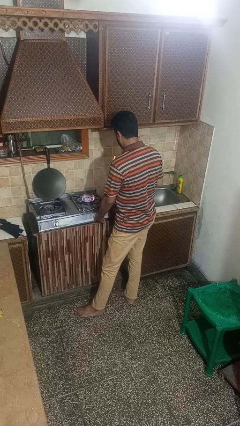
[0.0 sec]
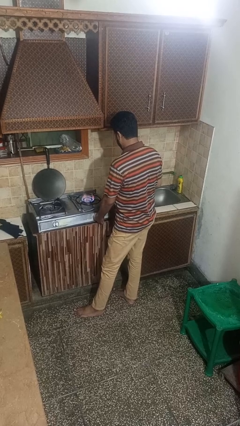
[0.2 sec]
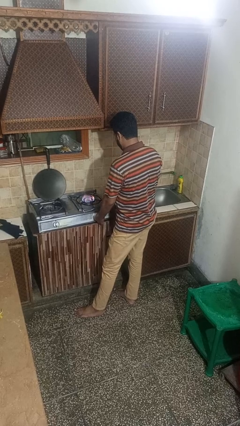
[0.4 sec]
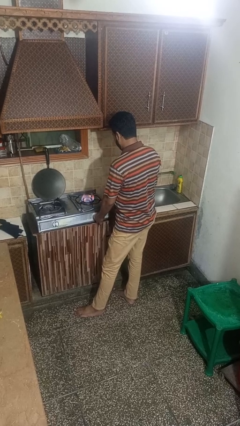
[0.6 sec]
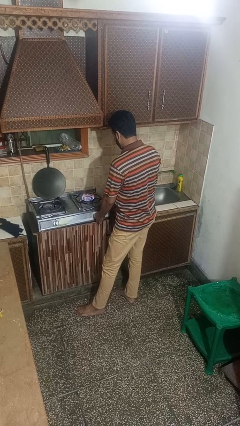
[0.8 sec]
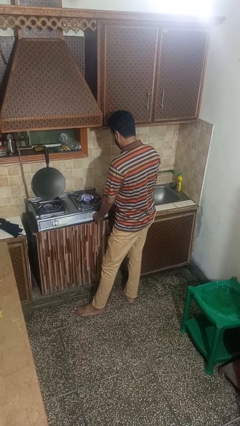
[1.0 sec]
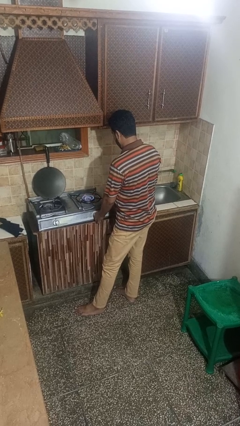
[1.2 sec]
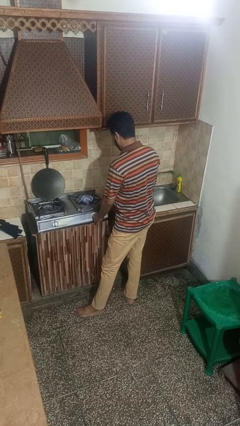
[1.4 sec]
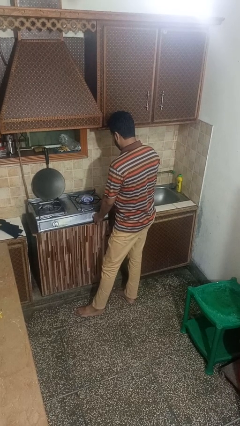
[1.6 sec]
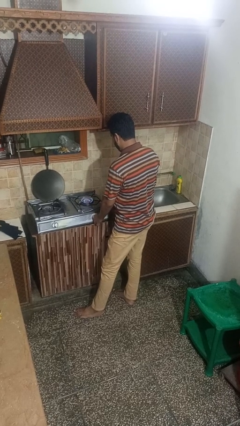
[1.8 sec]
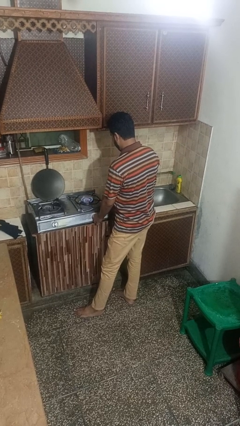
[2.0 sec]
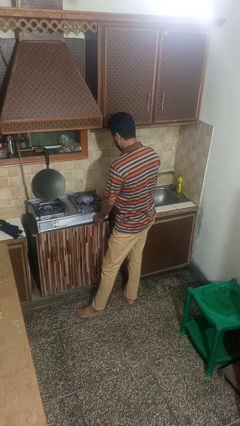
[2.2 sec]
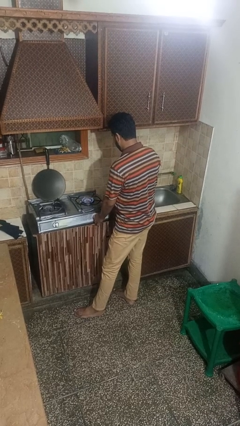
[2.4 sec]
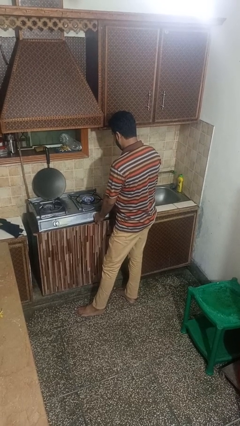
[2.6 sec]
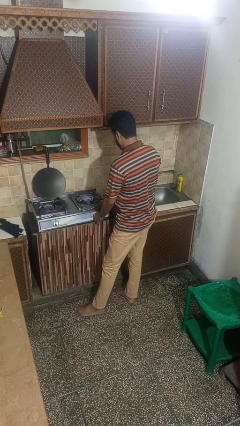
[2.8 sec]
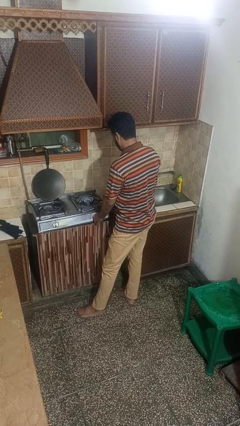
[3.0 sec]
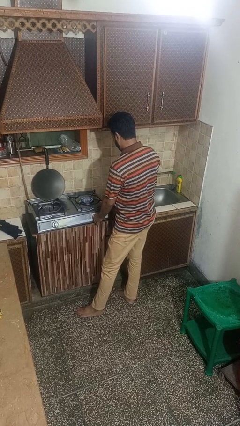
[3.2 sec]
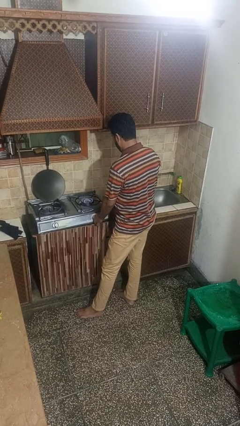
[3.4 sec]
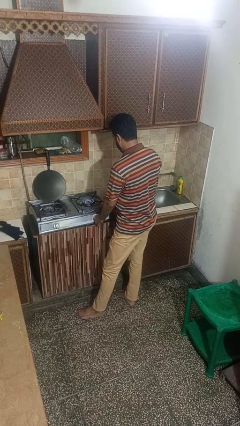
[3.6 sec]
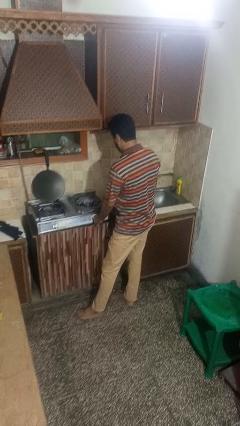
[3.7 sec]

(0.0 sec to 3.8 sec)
person turns off stovetop

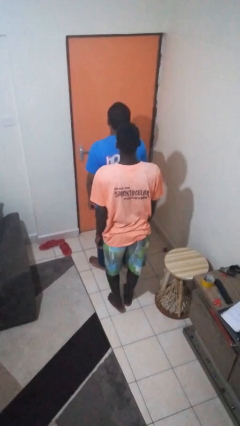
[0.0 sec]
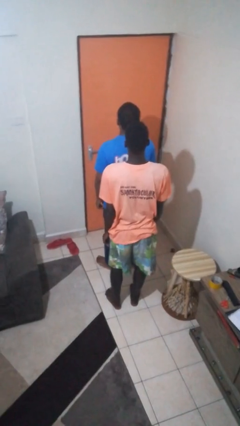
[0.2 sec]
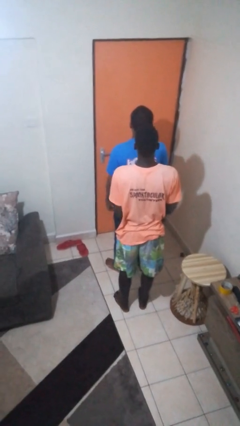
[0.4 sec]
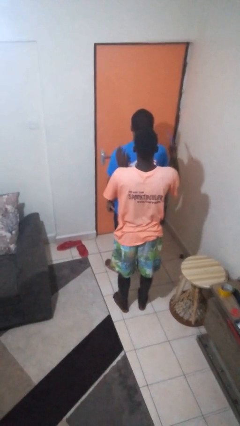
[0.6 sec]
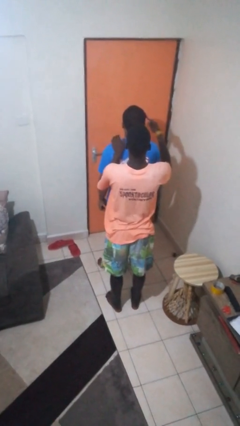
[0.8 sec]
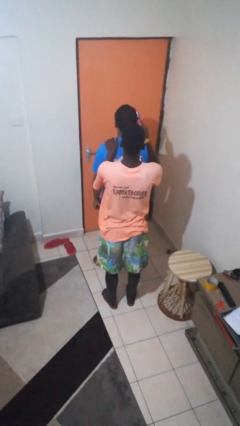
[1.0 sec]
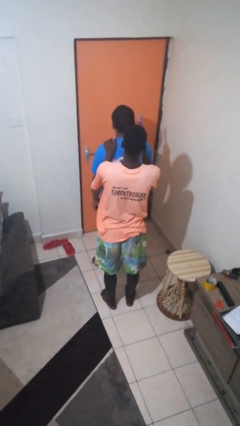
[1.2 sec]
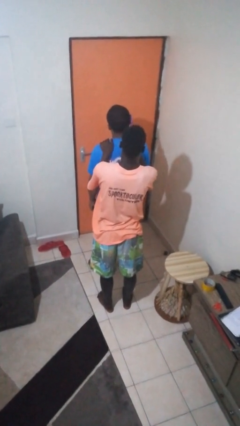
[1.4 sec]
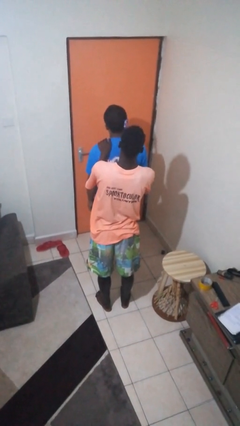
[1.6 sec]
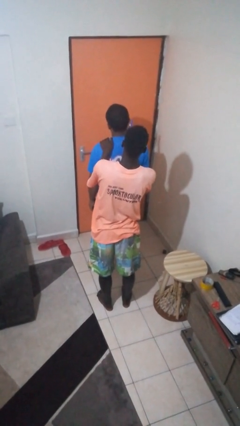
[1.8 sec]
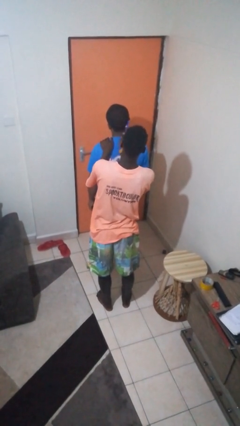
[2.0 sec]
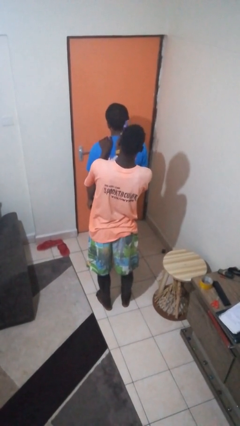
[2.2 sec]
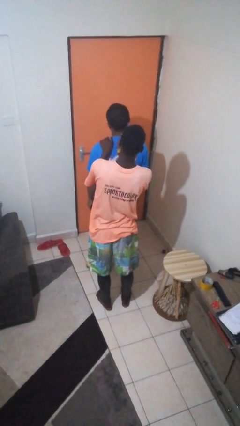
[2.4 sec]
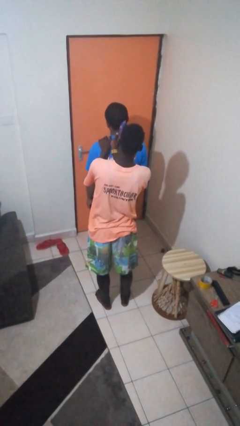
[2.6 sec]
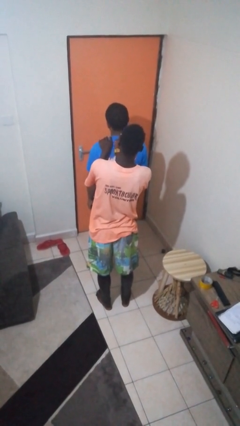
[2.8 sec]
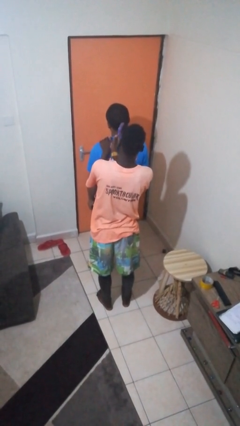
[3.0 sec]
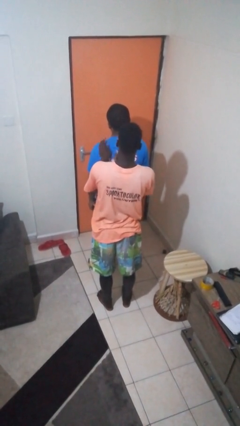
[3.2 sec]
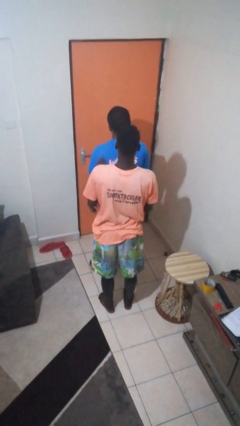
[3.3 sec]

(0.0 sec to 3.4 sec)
person brushes hair of person

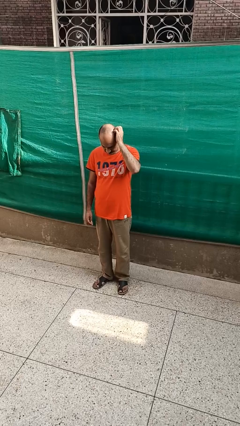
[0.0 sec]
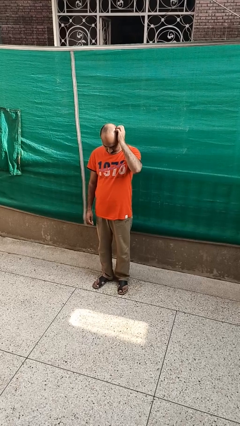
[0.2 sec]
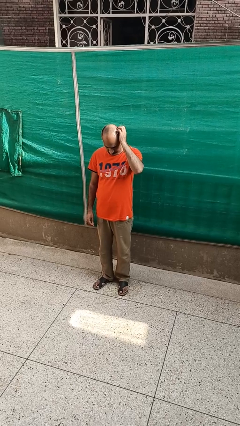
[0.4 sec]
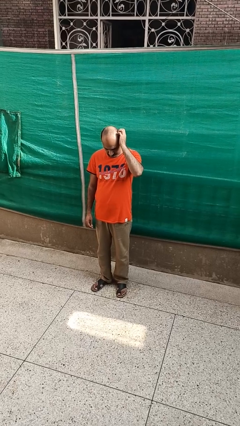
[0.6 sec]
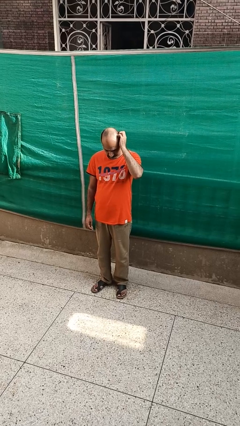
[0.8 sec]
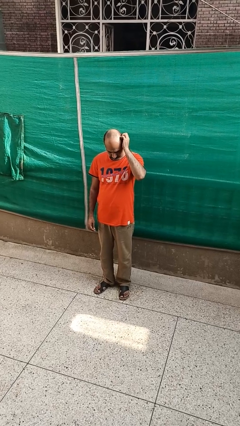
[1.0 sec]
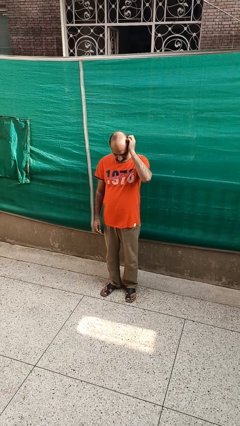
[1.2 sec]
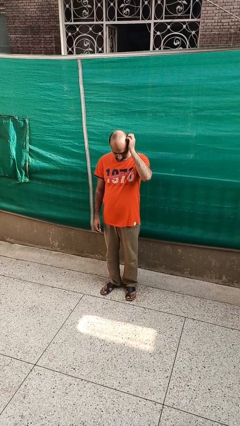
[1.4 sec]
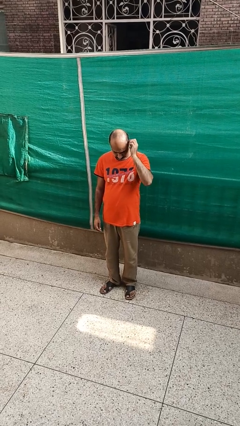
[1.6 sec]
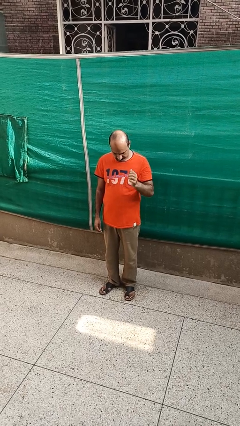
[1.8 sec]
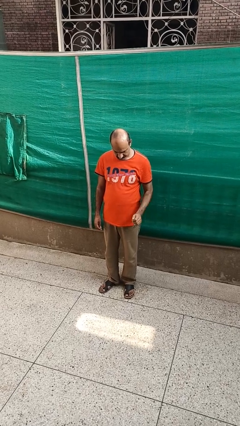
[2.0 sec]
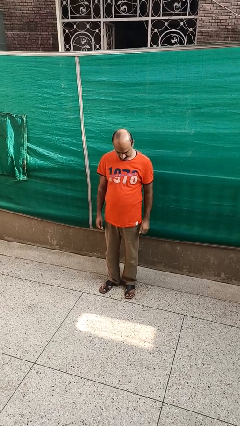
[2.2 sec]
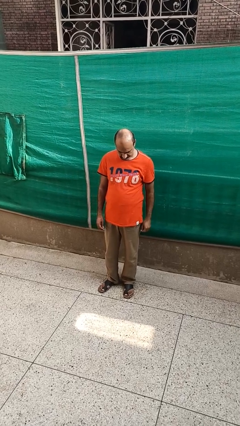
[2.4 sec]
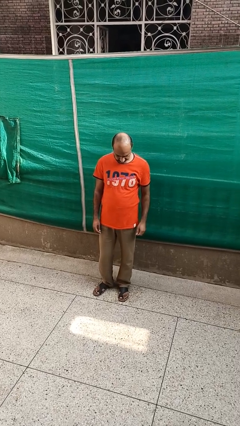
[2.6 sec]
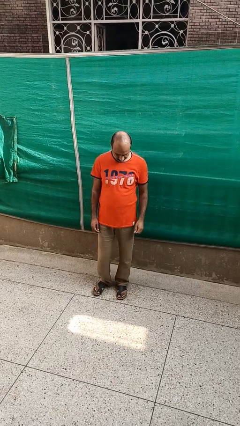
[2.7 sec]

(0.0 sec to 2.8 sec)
person scratches face

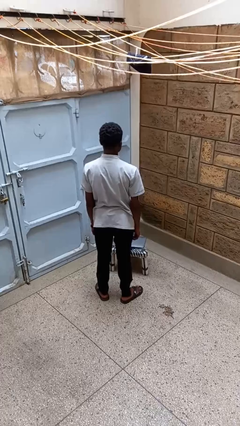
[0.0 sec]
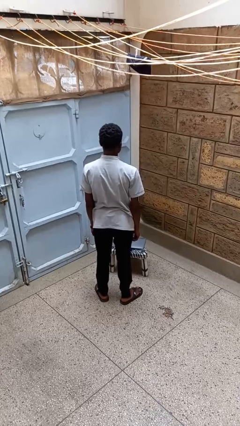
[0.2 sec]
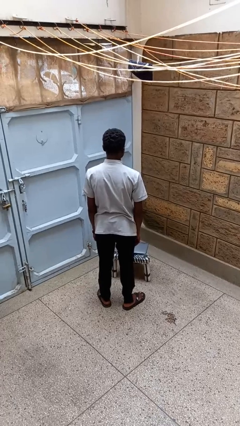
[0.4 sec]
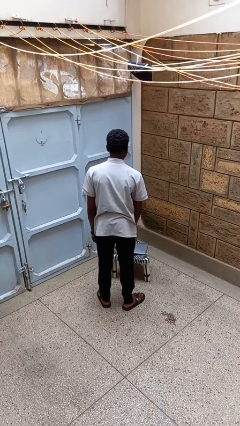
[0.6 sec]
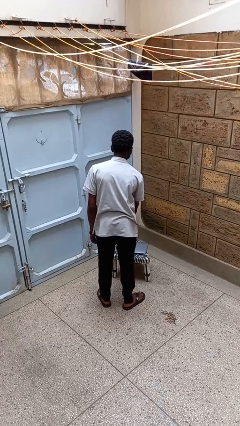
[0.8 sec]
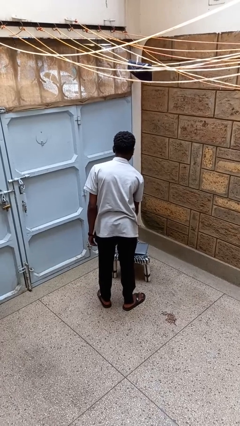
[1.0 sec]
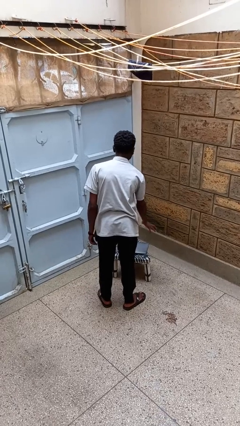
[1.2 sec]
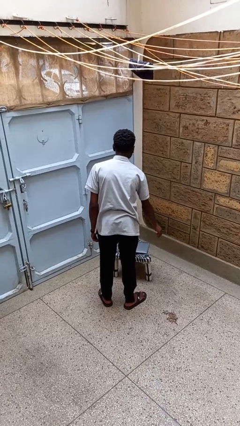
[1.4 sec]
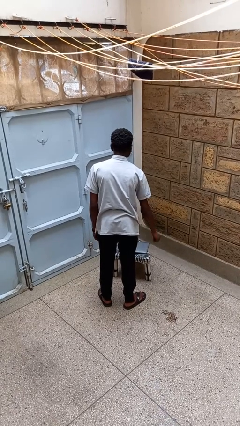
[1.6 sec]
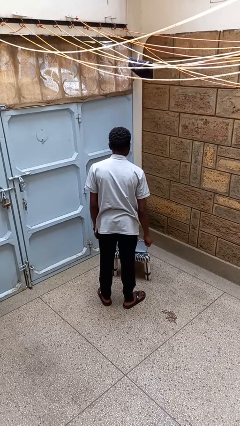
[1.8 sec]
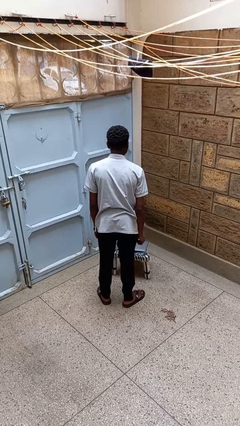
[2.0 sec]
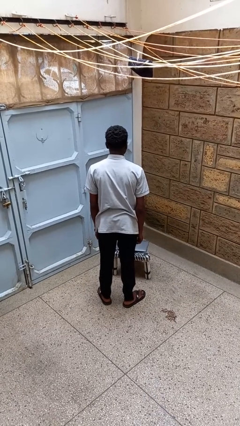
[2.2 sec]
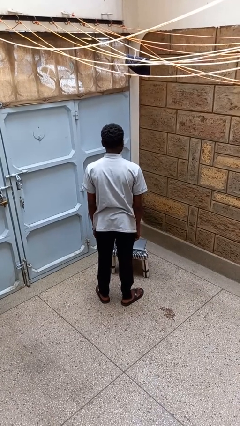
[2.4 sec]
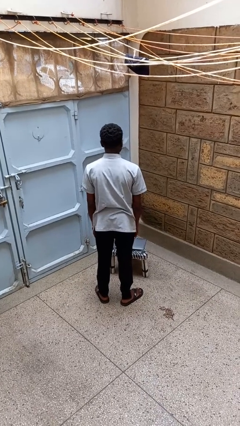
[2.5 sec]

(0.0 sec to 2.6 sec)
person waves hand over object

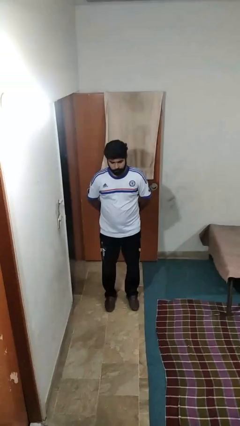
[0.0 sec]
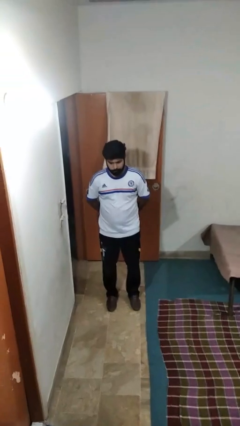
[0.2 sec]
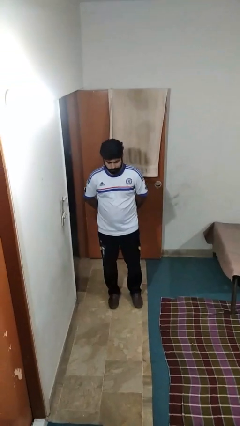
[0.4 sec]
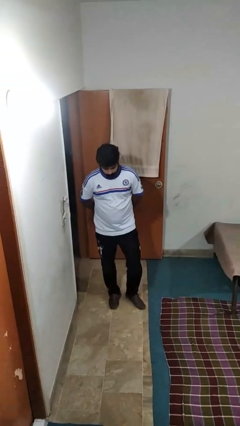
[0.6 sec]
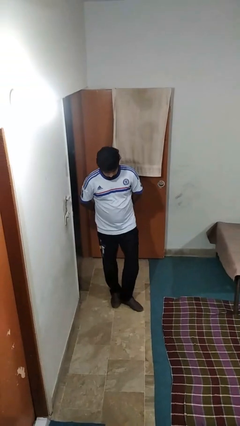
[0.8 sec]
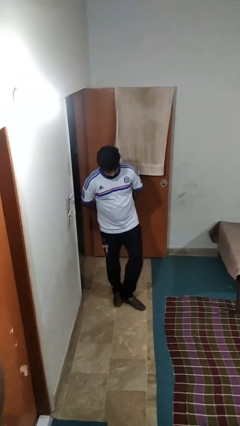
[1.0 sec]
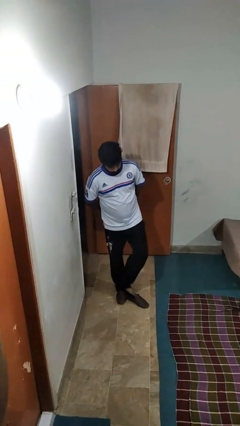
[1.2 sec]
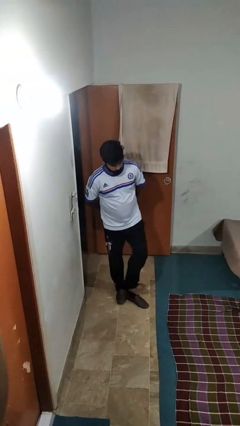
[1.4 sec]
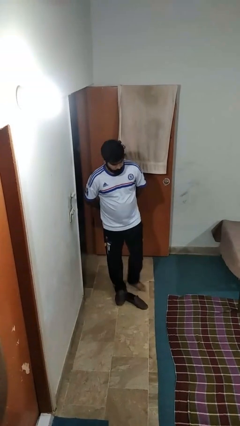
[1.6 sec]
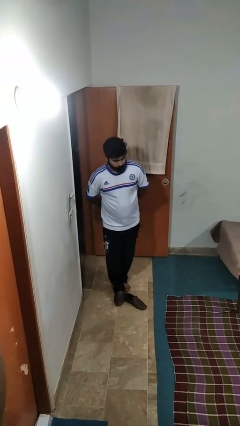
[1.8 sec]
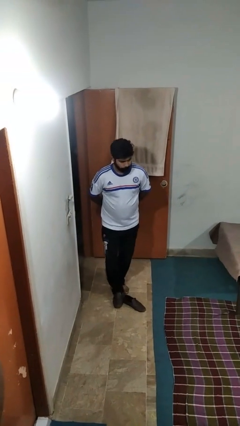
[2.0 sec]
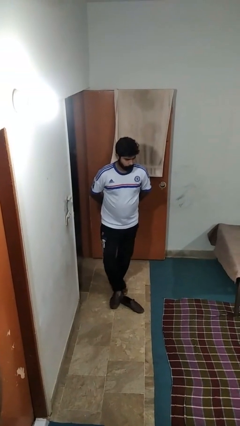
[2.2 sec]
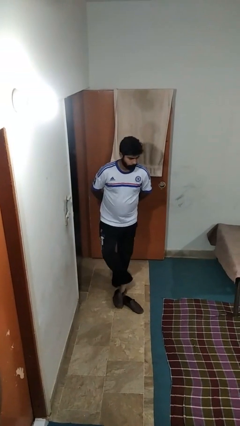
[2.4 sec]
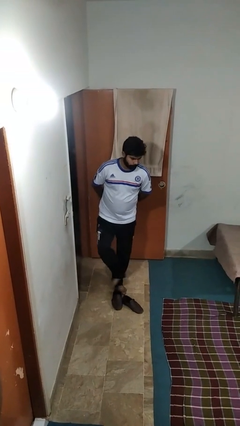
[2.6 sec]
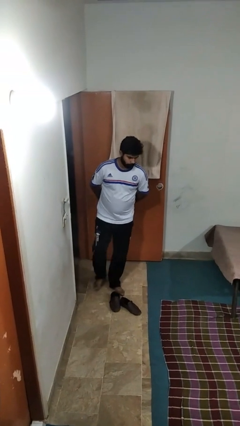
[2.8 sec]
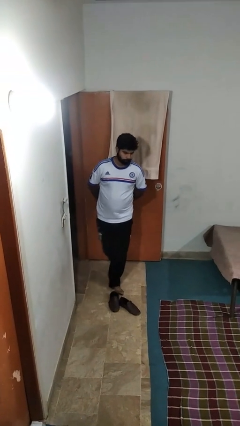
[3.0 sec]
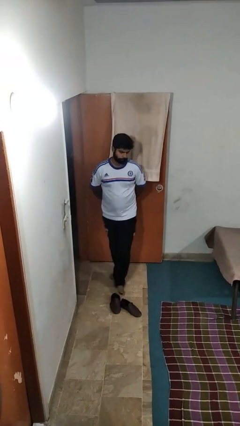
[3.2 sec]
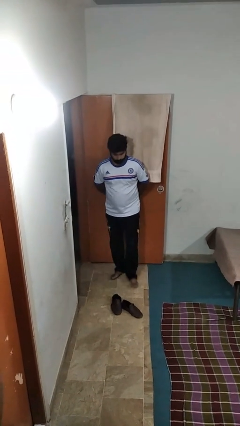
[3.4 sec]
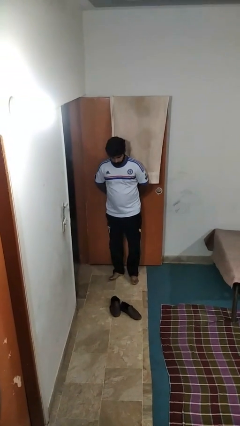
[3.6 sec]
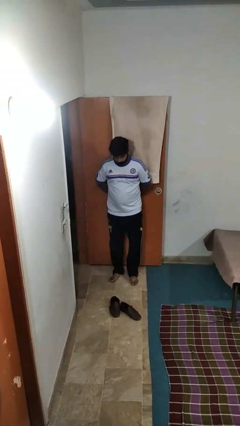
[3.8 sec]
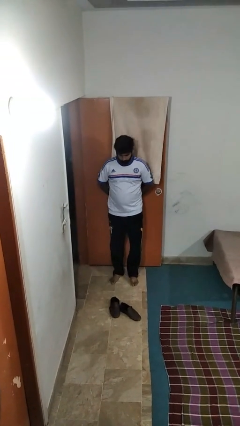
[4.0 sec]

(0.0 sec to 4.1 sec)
person takes off shoes

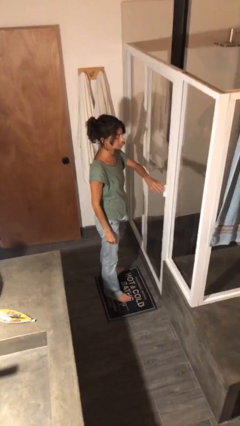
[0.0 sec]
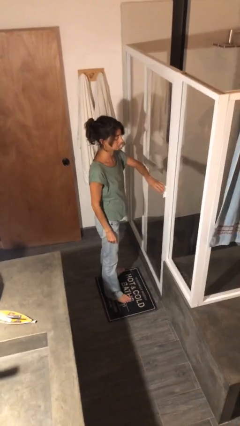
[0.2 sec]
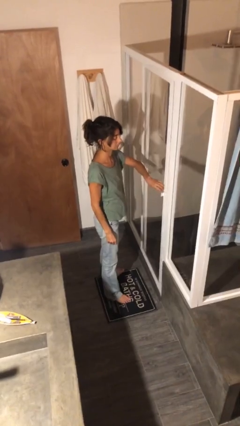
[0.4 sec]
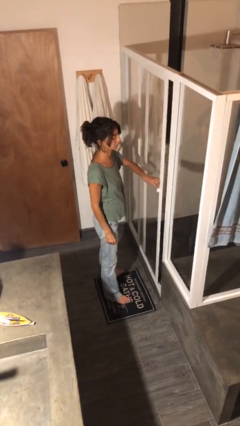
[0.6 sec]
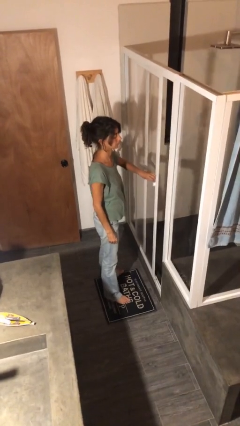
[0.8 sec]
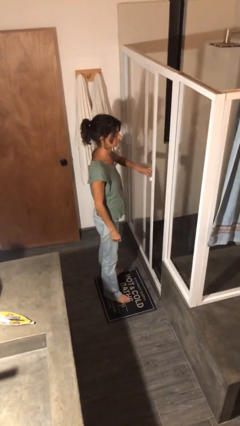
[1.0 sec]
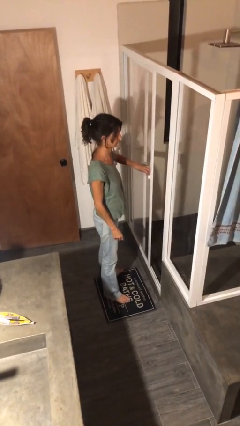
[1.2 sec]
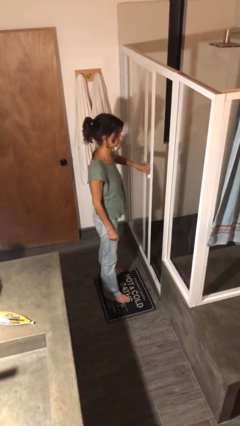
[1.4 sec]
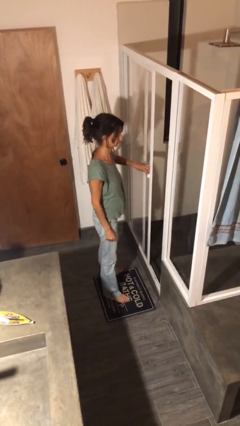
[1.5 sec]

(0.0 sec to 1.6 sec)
person opens sliding door
